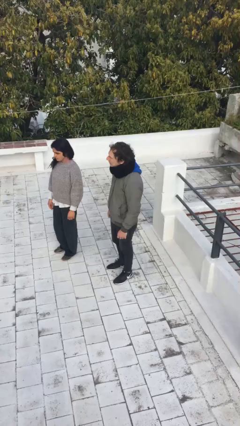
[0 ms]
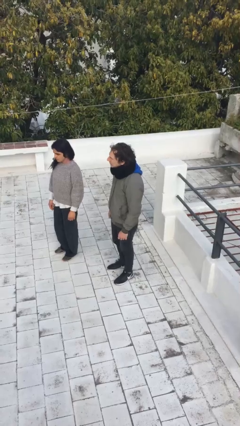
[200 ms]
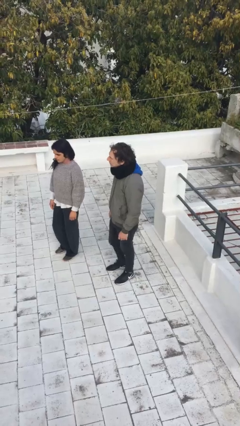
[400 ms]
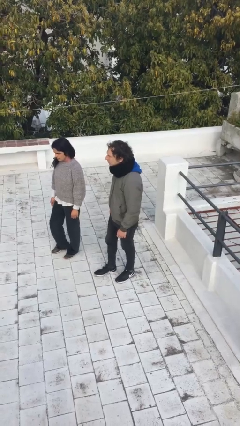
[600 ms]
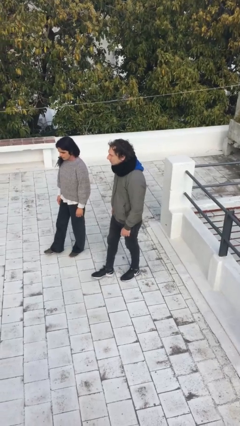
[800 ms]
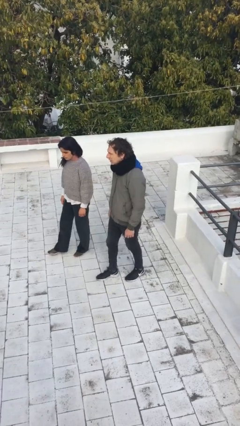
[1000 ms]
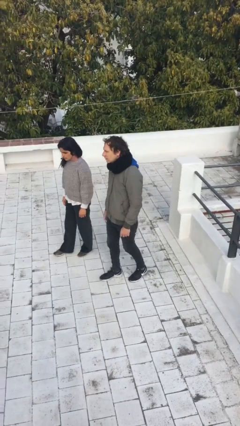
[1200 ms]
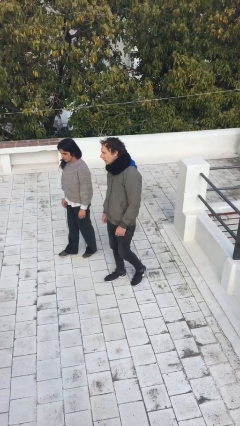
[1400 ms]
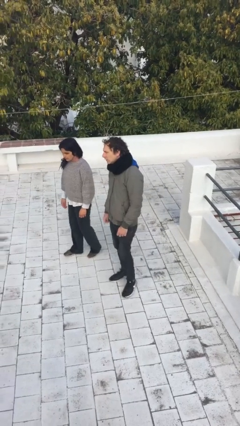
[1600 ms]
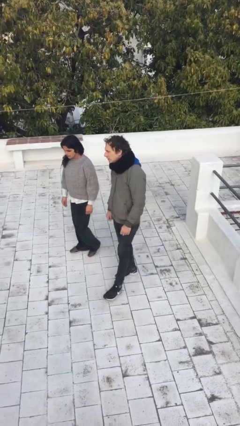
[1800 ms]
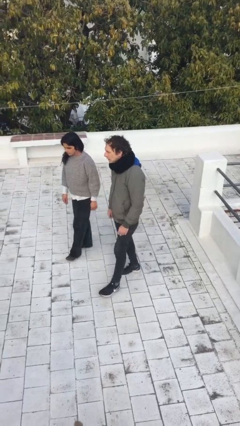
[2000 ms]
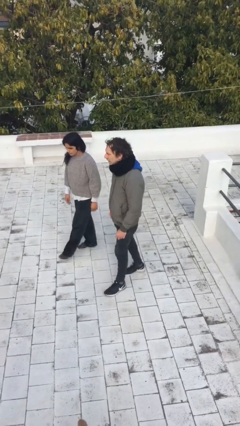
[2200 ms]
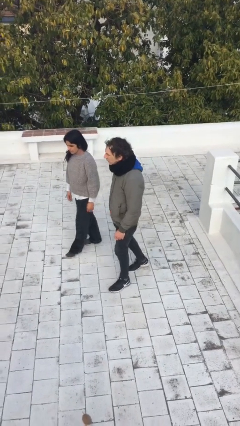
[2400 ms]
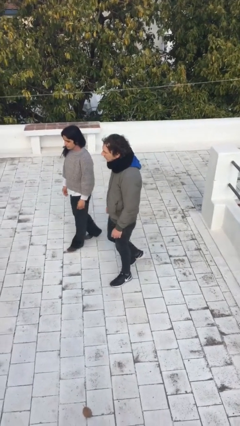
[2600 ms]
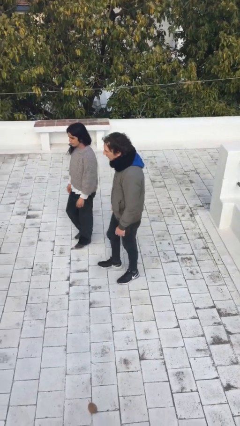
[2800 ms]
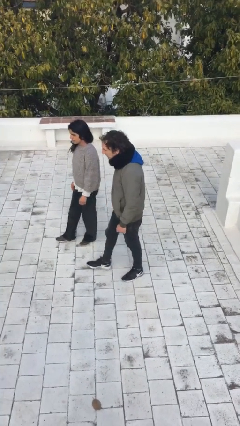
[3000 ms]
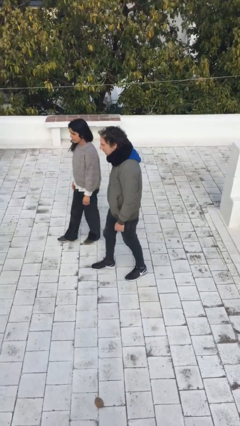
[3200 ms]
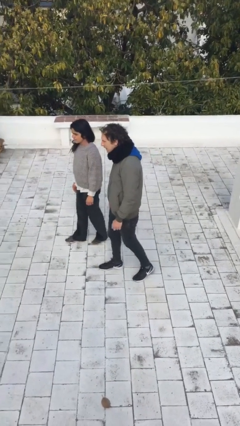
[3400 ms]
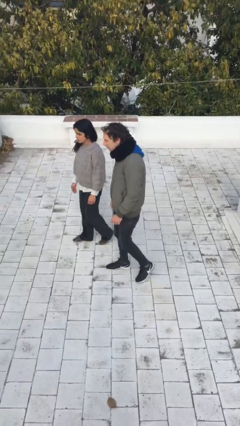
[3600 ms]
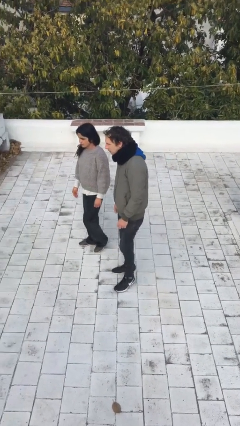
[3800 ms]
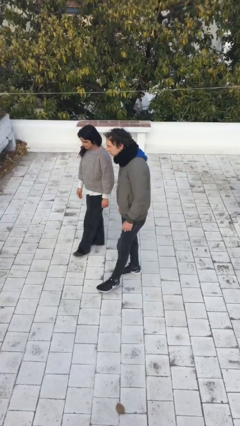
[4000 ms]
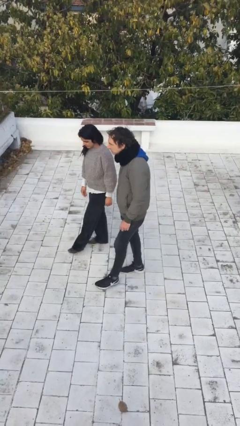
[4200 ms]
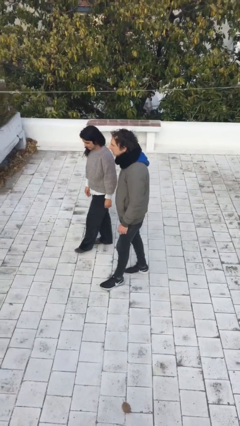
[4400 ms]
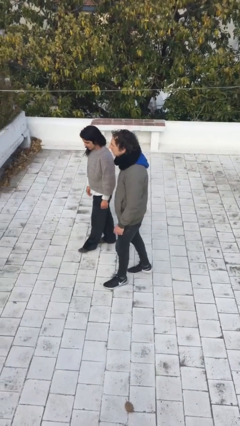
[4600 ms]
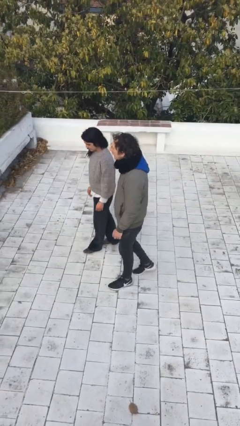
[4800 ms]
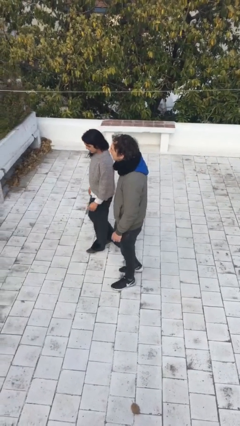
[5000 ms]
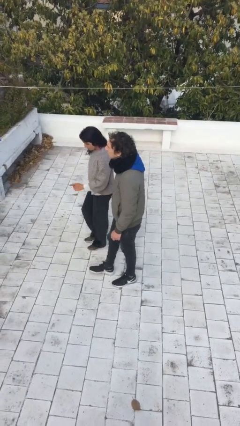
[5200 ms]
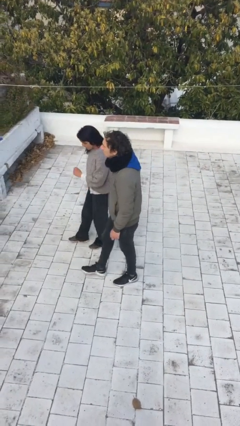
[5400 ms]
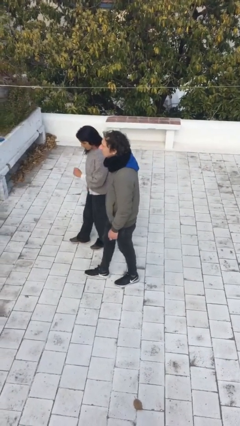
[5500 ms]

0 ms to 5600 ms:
person talks to person

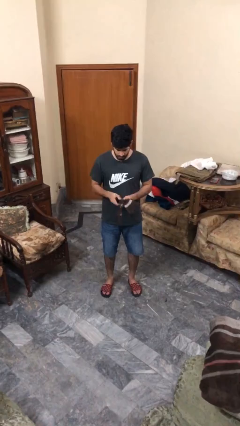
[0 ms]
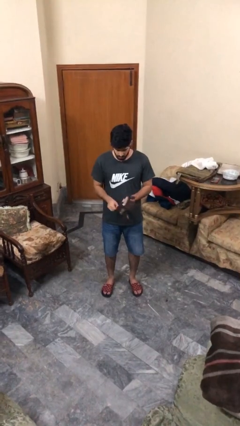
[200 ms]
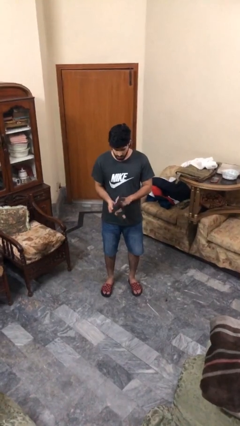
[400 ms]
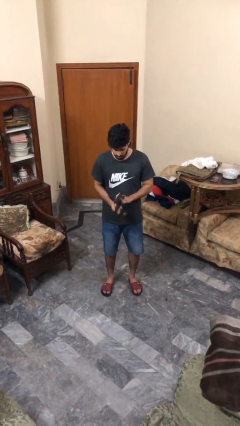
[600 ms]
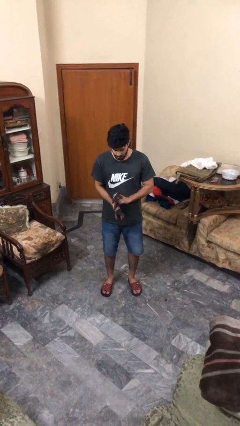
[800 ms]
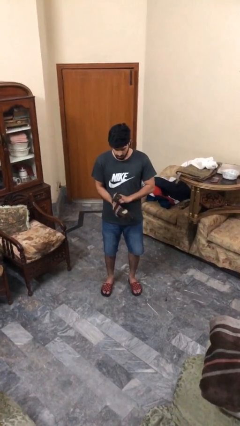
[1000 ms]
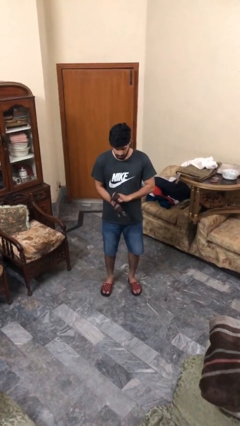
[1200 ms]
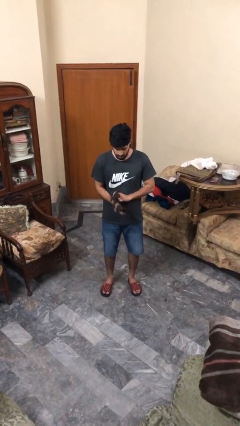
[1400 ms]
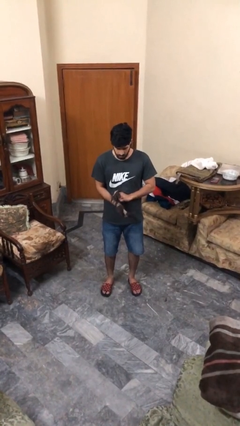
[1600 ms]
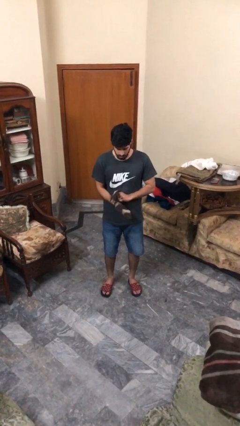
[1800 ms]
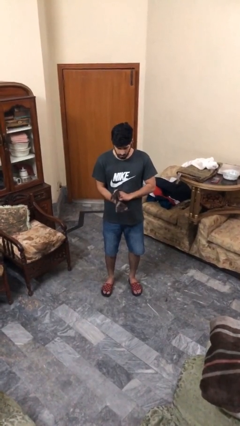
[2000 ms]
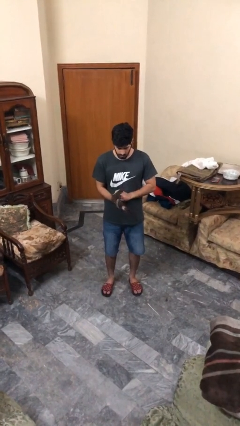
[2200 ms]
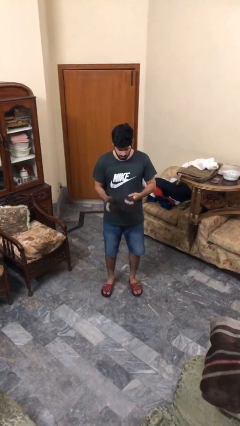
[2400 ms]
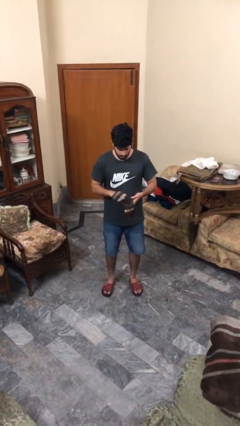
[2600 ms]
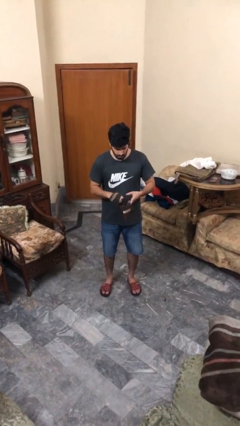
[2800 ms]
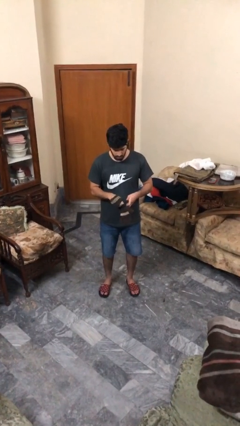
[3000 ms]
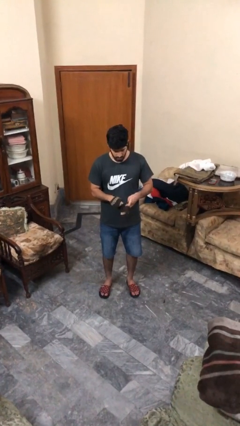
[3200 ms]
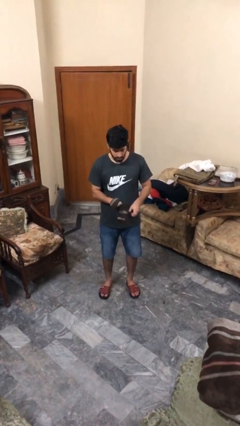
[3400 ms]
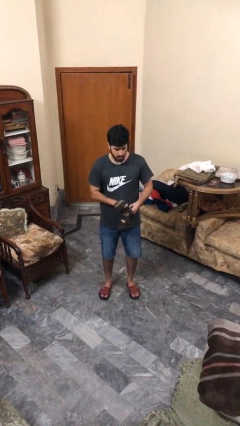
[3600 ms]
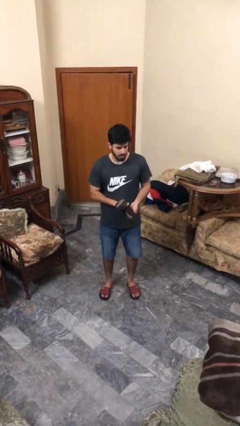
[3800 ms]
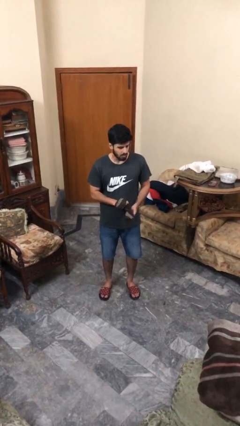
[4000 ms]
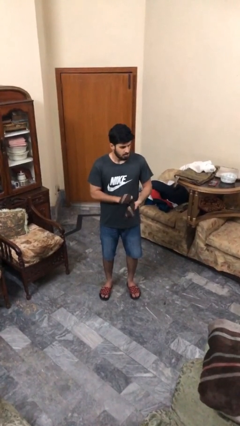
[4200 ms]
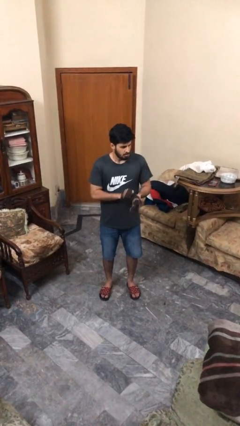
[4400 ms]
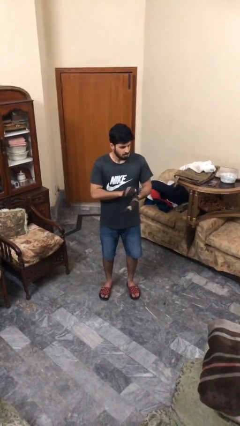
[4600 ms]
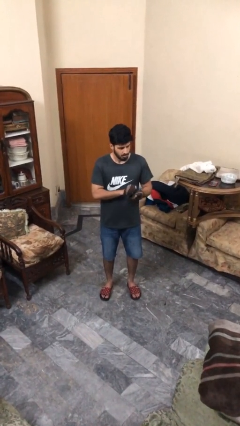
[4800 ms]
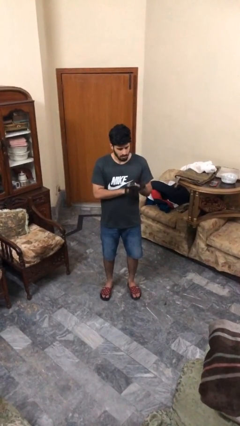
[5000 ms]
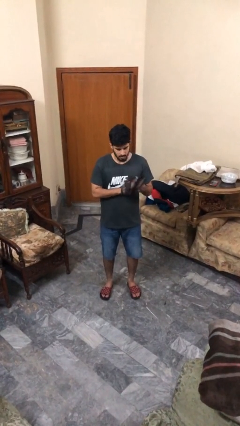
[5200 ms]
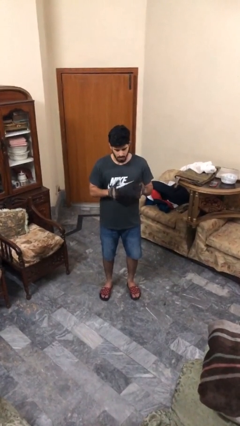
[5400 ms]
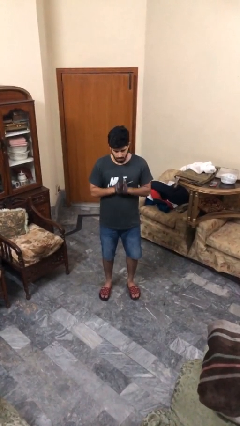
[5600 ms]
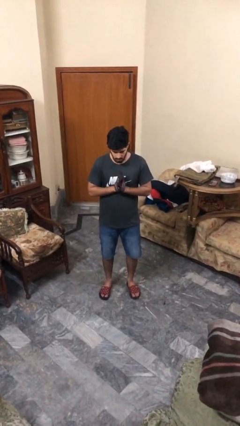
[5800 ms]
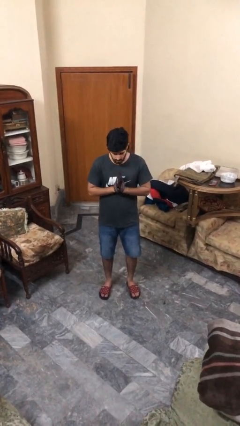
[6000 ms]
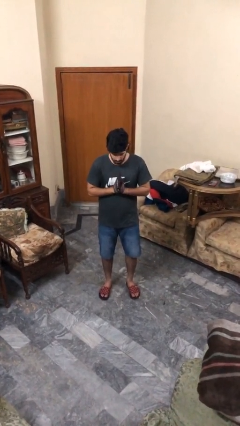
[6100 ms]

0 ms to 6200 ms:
person puts on gloves

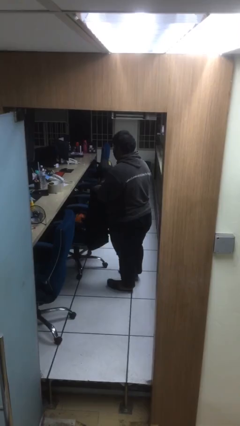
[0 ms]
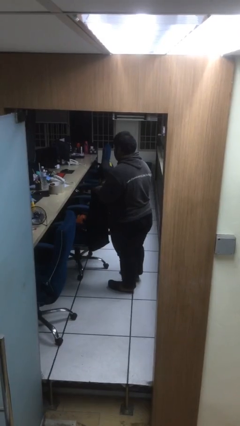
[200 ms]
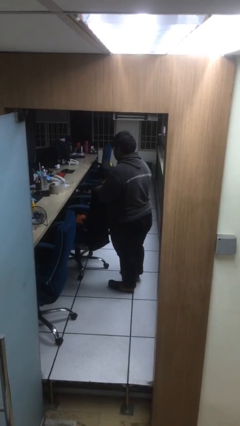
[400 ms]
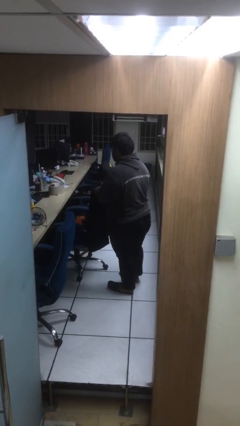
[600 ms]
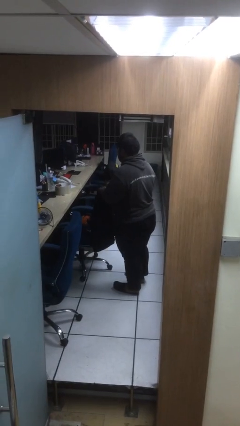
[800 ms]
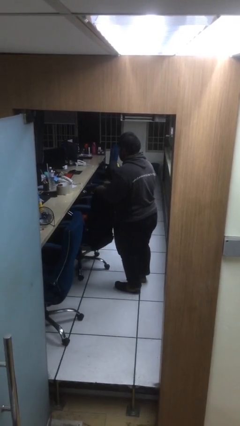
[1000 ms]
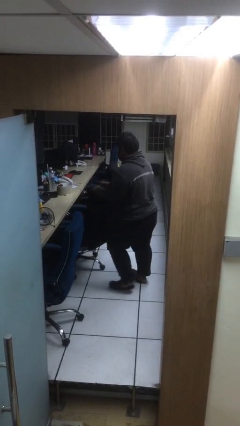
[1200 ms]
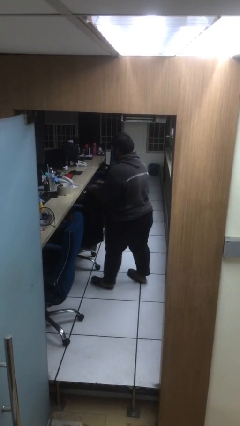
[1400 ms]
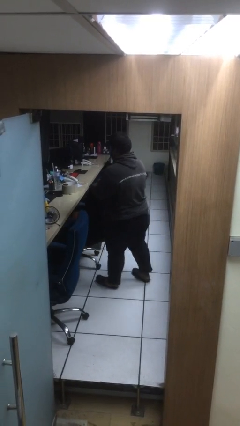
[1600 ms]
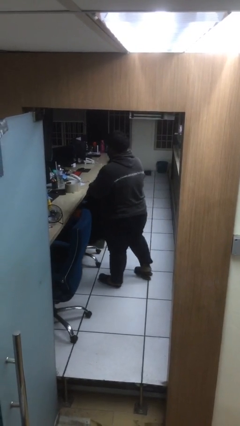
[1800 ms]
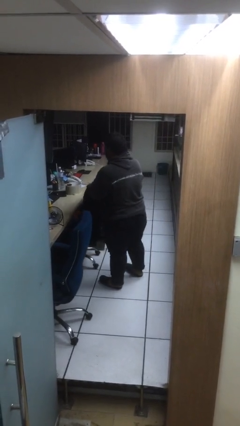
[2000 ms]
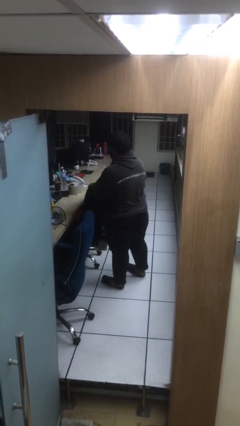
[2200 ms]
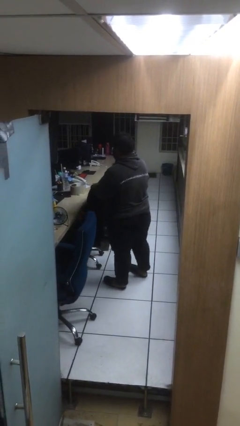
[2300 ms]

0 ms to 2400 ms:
person pushes in chair

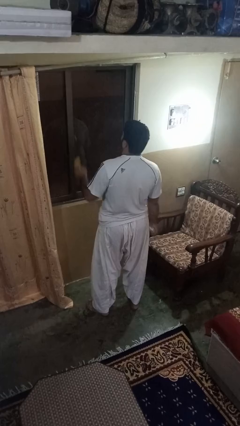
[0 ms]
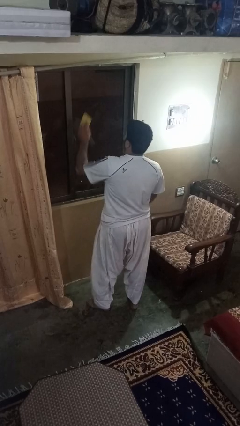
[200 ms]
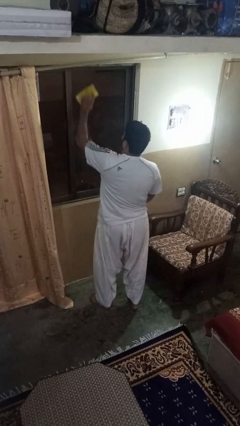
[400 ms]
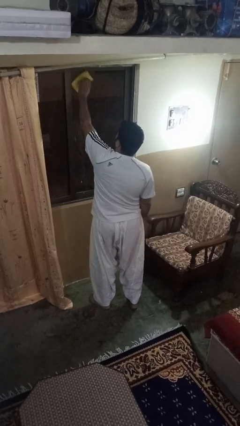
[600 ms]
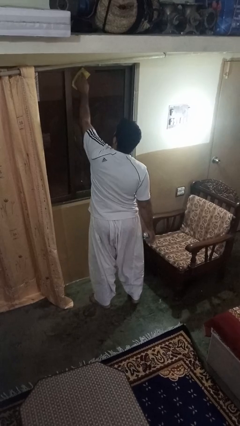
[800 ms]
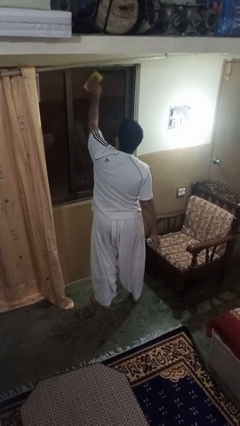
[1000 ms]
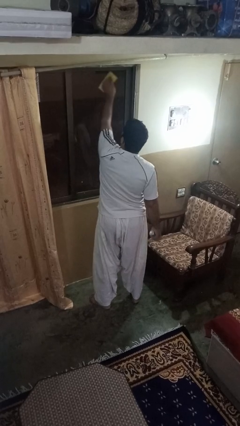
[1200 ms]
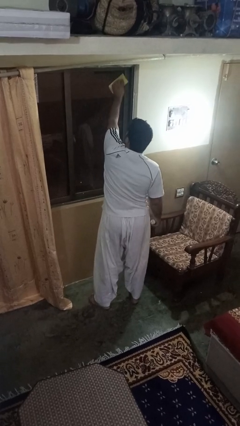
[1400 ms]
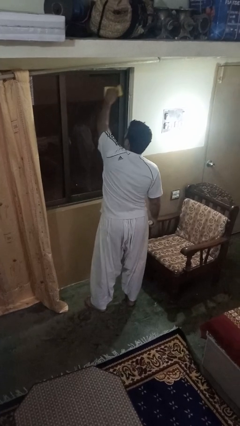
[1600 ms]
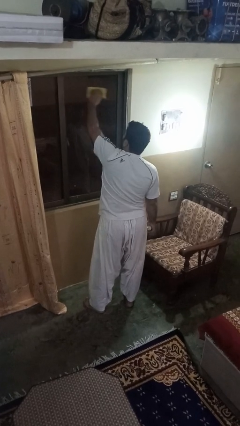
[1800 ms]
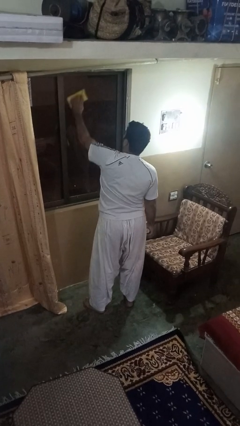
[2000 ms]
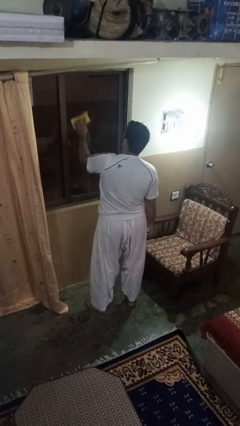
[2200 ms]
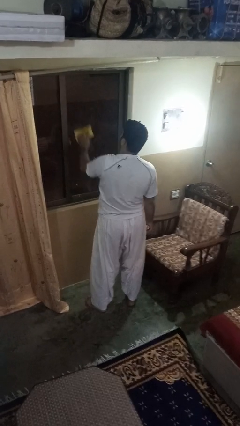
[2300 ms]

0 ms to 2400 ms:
person washes window

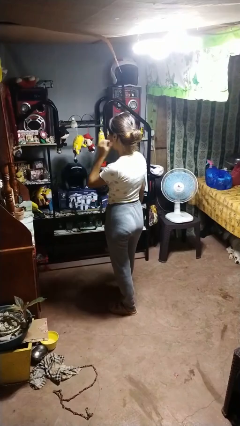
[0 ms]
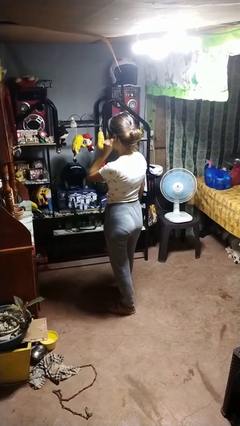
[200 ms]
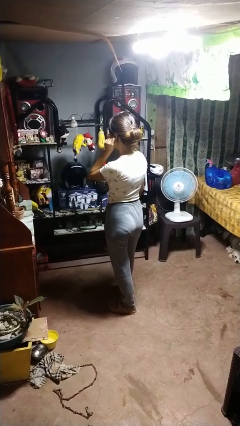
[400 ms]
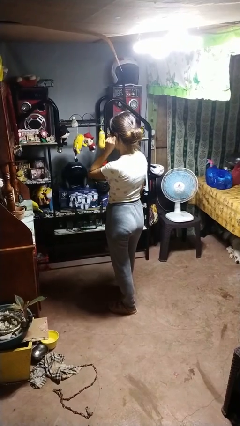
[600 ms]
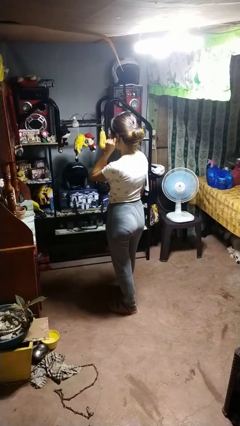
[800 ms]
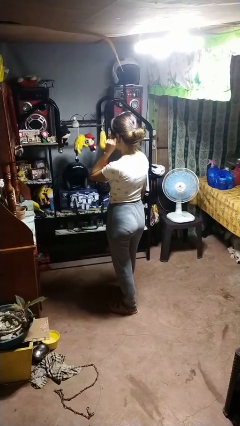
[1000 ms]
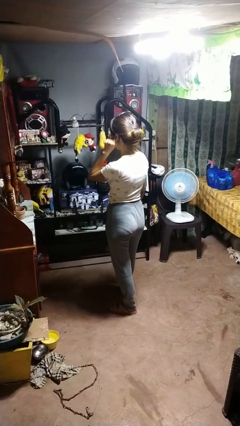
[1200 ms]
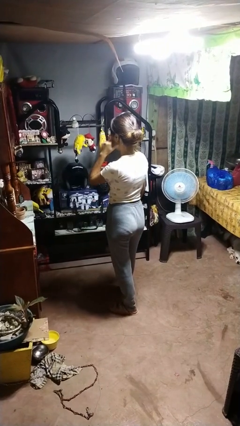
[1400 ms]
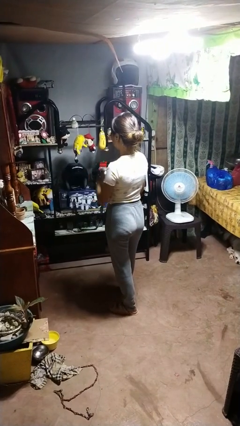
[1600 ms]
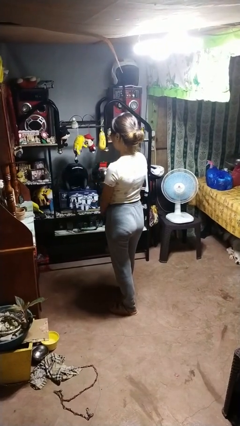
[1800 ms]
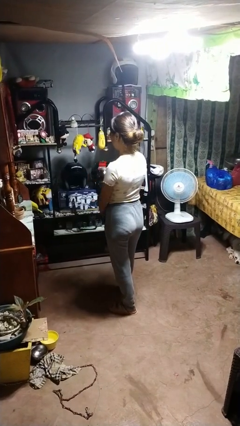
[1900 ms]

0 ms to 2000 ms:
person touches earlobe
